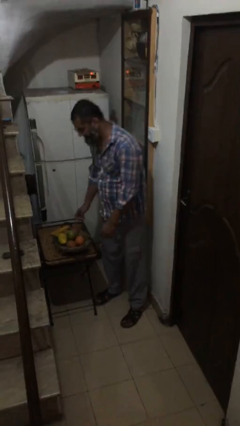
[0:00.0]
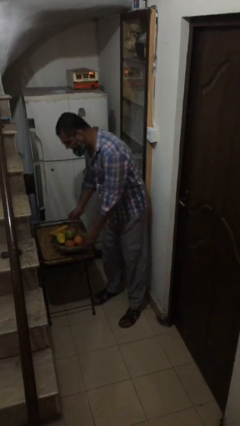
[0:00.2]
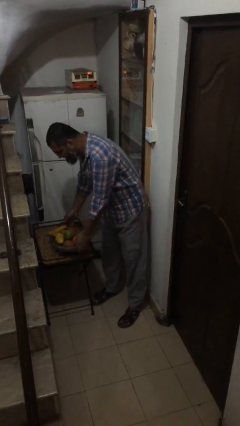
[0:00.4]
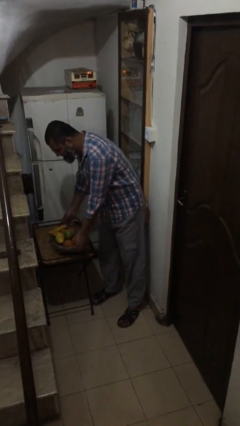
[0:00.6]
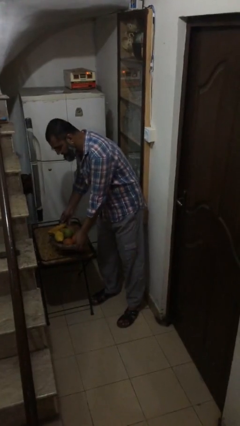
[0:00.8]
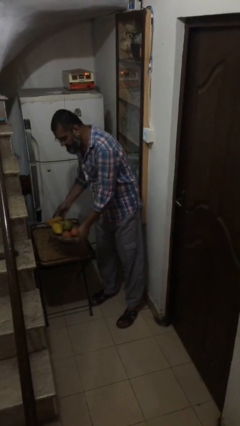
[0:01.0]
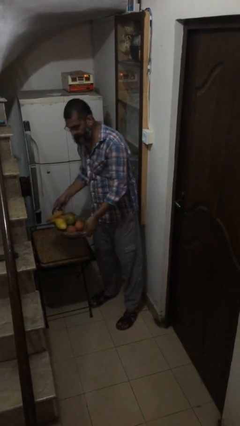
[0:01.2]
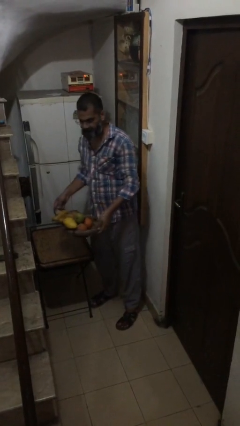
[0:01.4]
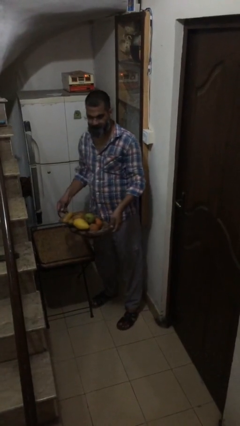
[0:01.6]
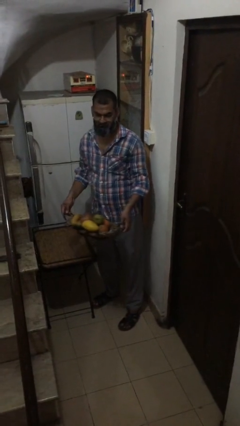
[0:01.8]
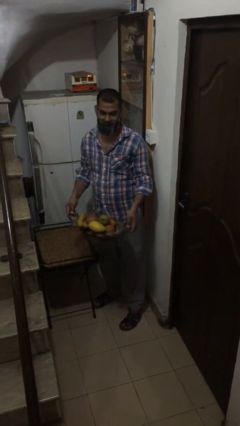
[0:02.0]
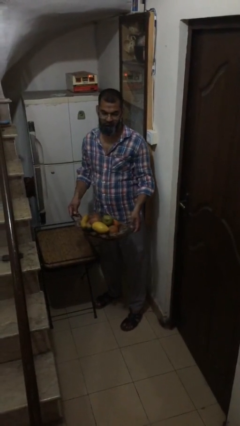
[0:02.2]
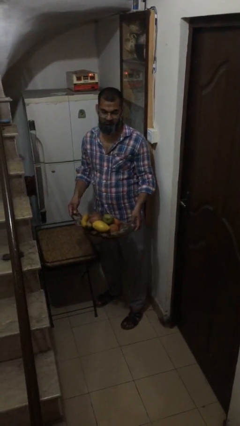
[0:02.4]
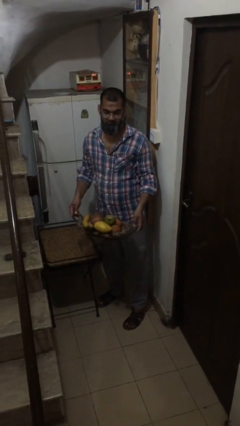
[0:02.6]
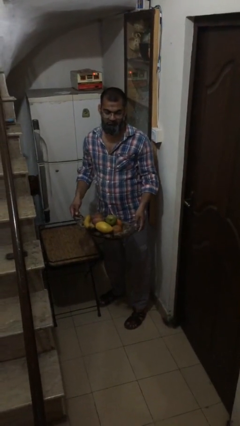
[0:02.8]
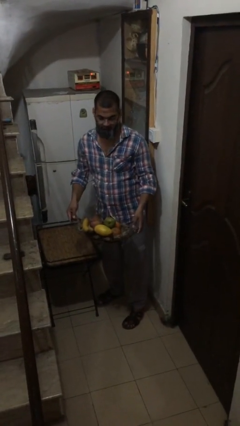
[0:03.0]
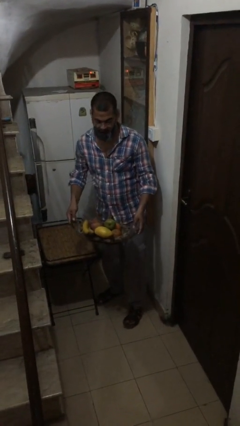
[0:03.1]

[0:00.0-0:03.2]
person picks up object from table

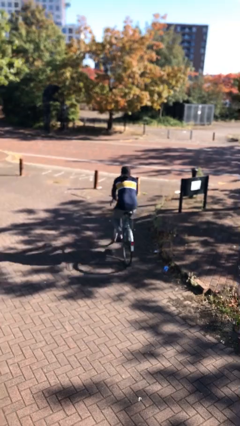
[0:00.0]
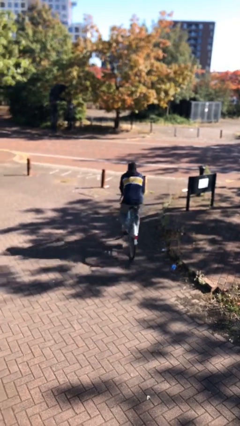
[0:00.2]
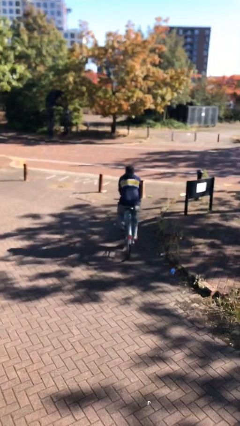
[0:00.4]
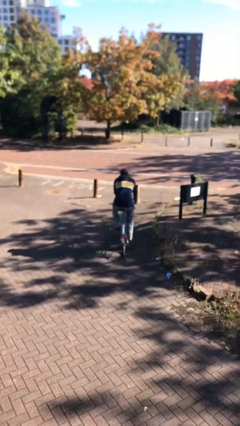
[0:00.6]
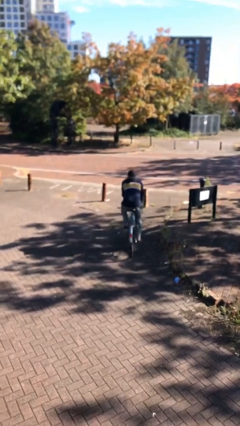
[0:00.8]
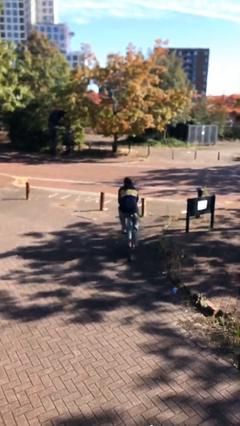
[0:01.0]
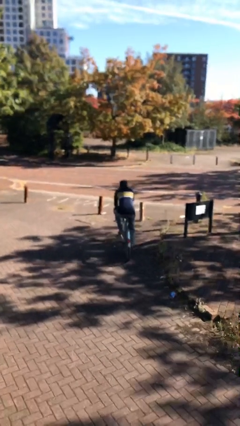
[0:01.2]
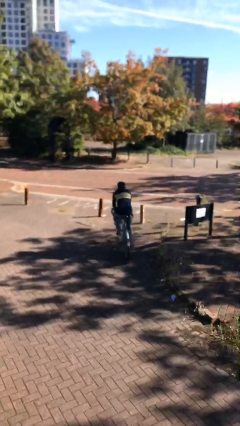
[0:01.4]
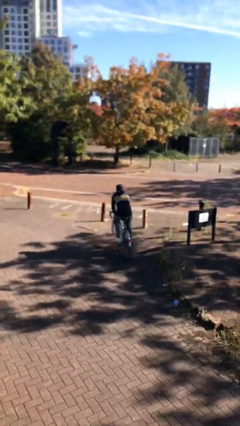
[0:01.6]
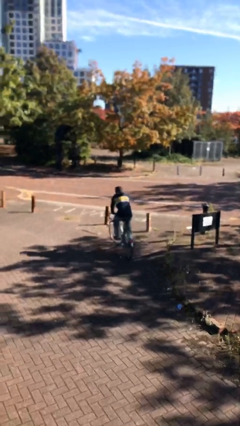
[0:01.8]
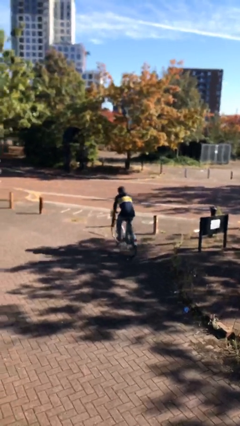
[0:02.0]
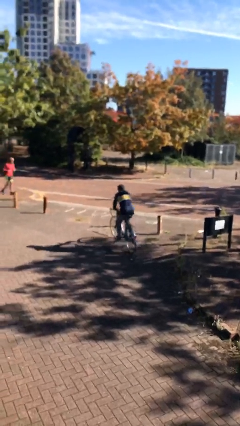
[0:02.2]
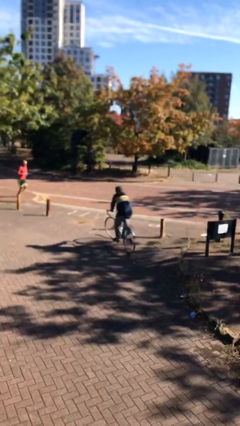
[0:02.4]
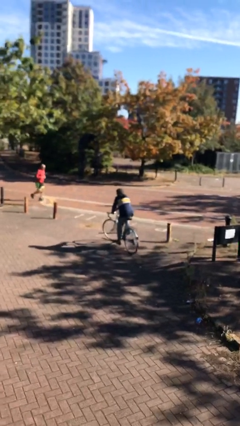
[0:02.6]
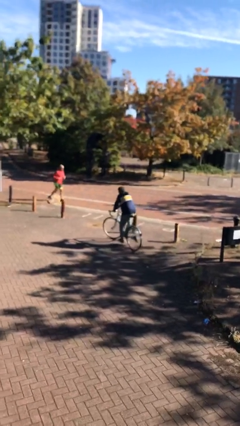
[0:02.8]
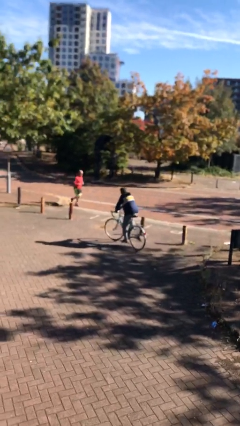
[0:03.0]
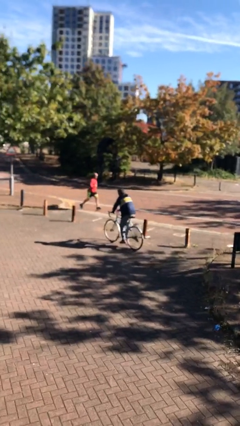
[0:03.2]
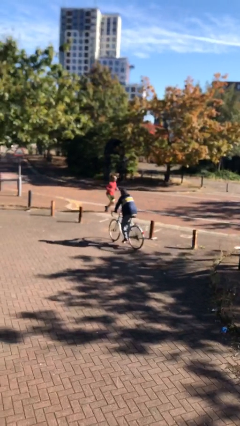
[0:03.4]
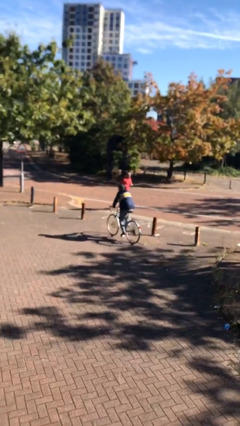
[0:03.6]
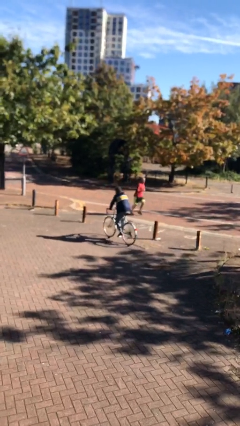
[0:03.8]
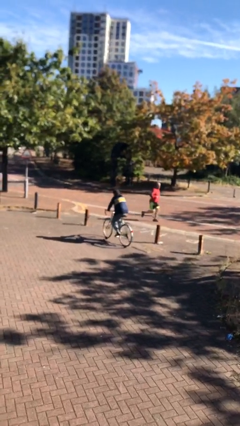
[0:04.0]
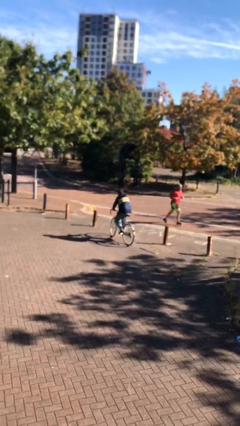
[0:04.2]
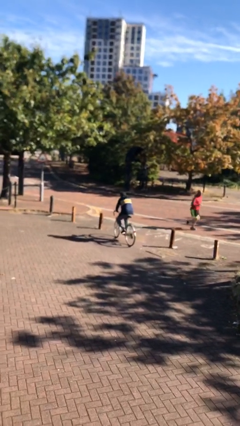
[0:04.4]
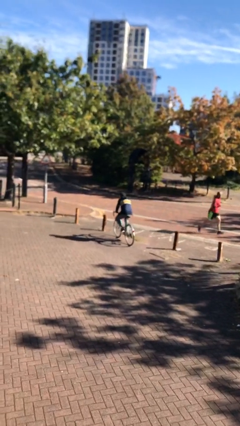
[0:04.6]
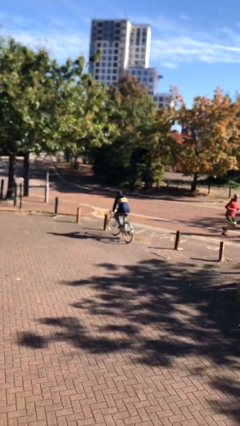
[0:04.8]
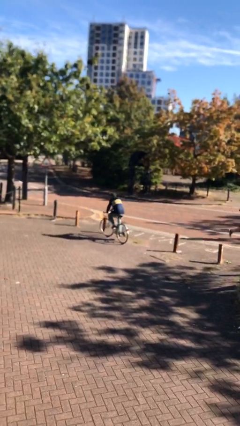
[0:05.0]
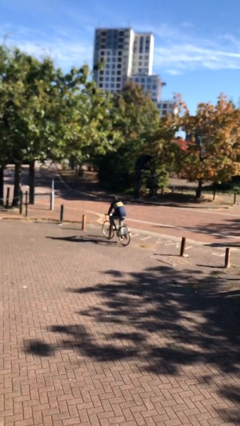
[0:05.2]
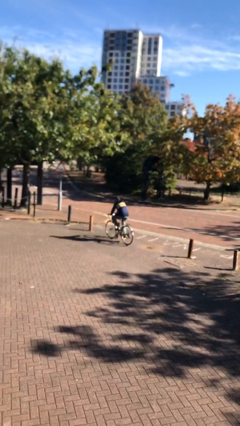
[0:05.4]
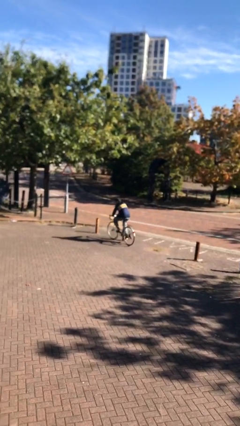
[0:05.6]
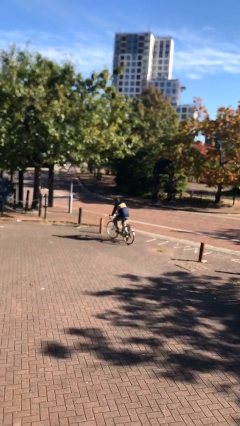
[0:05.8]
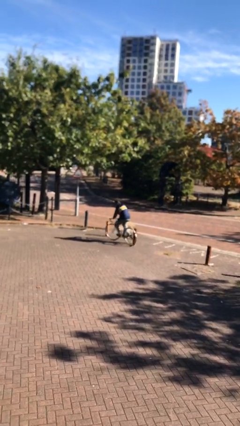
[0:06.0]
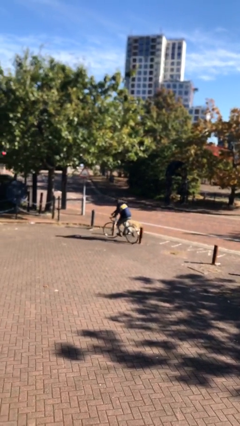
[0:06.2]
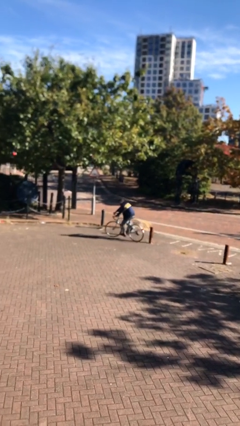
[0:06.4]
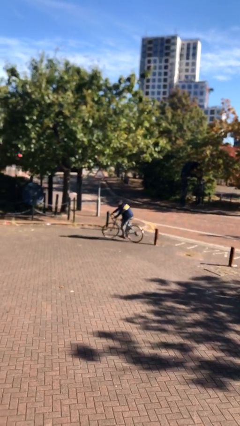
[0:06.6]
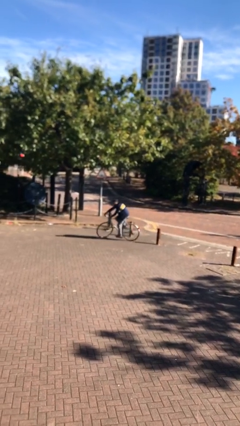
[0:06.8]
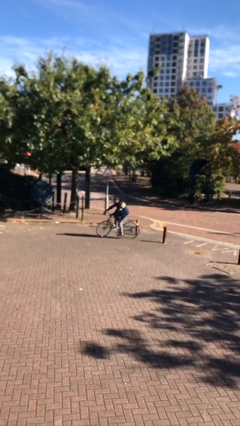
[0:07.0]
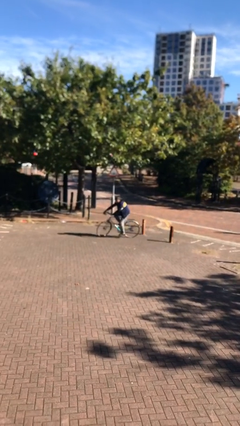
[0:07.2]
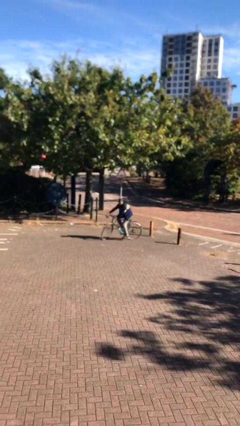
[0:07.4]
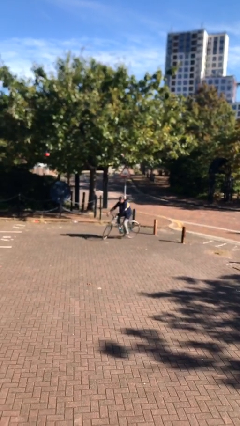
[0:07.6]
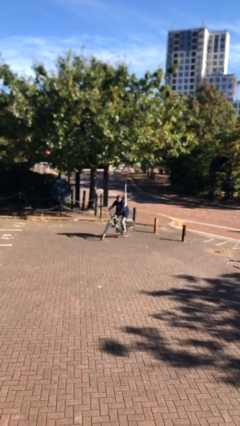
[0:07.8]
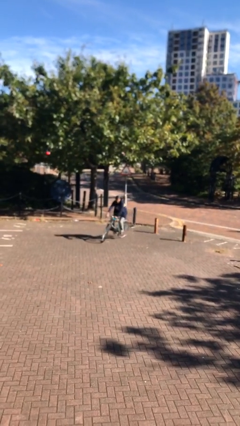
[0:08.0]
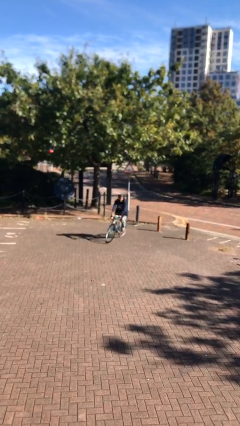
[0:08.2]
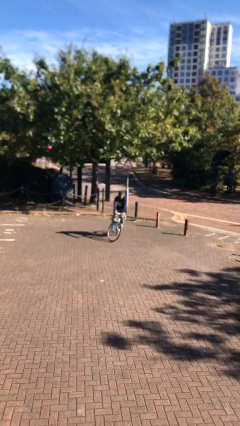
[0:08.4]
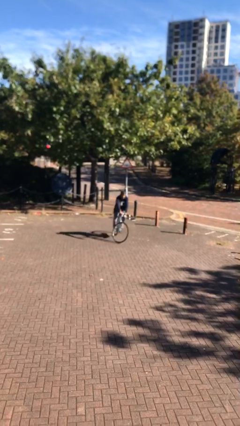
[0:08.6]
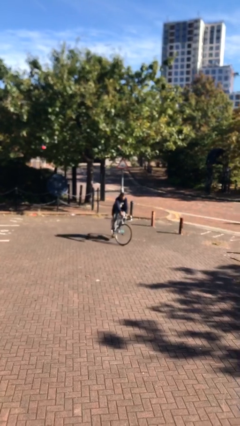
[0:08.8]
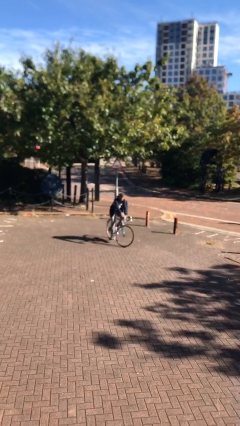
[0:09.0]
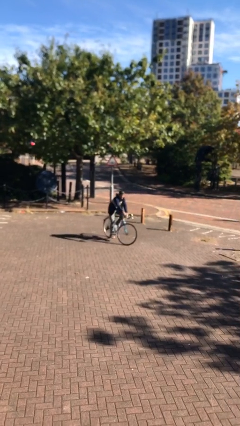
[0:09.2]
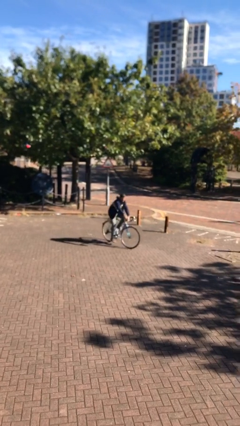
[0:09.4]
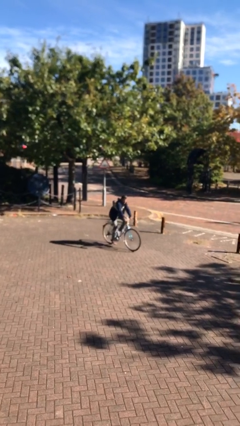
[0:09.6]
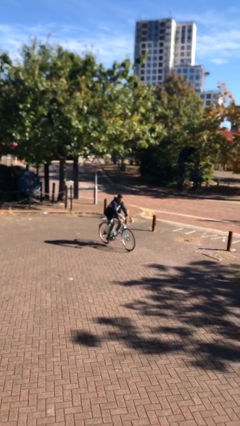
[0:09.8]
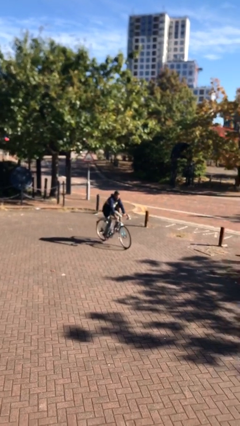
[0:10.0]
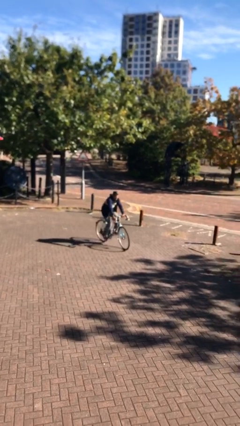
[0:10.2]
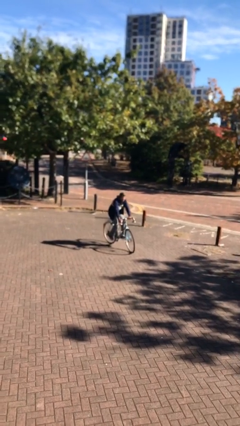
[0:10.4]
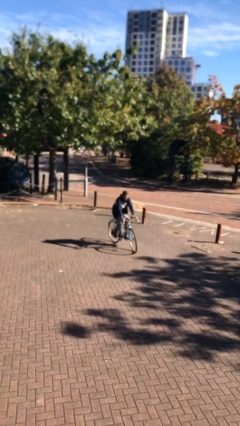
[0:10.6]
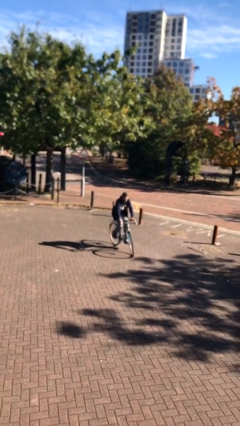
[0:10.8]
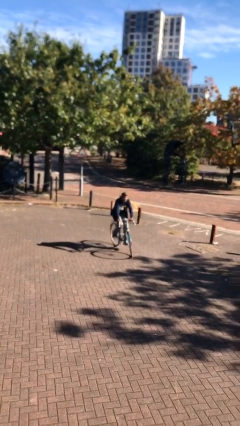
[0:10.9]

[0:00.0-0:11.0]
person rides bicycle

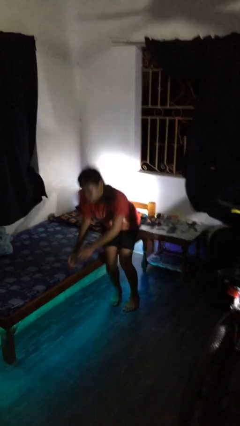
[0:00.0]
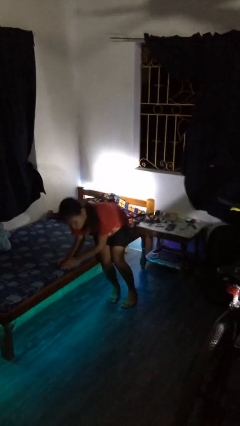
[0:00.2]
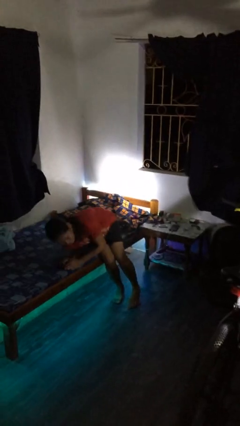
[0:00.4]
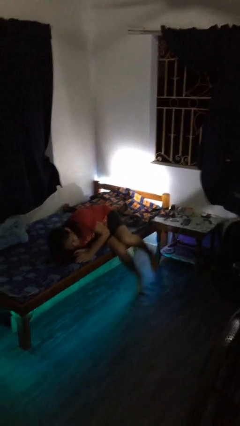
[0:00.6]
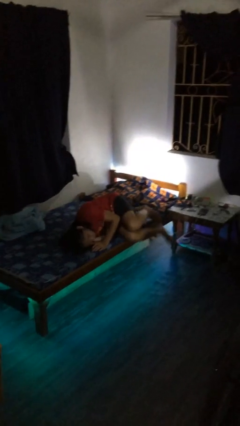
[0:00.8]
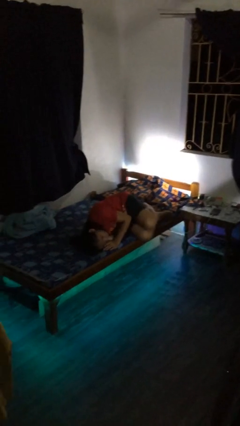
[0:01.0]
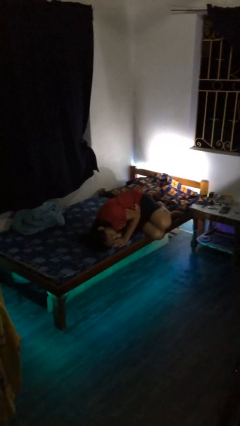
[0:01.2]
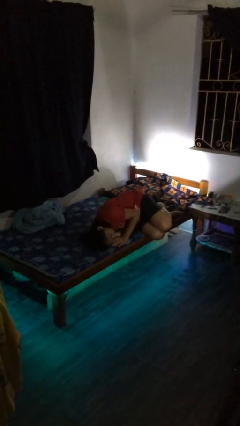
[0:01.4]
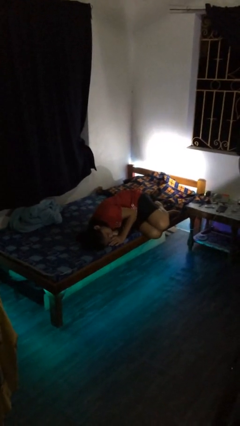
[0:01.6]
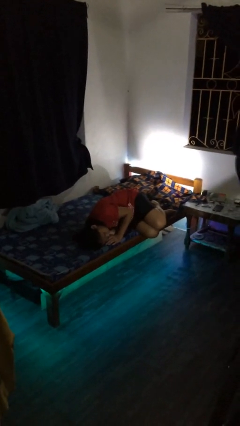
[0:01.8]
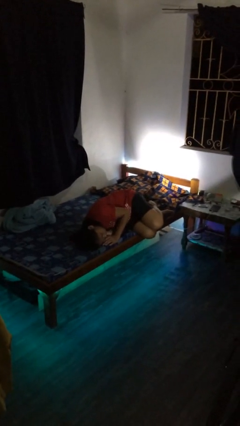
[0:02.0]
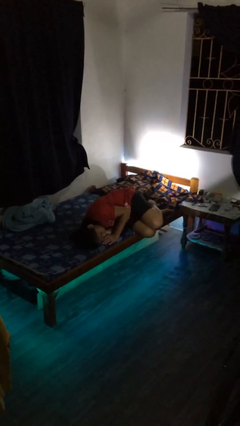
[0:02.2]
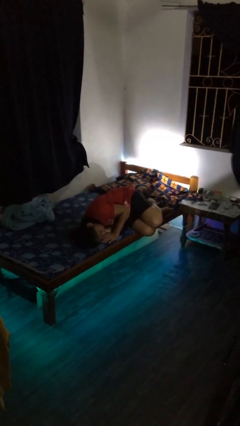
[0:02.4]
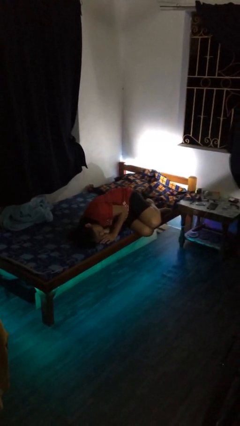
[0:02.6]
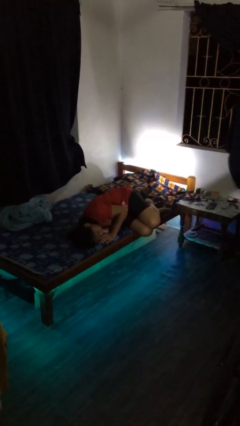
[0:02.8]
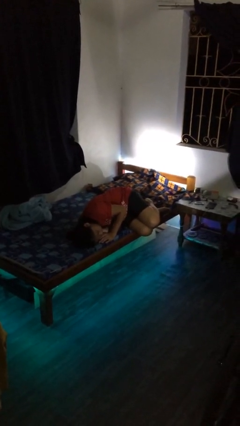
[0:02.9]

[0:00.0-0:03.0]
person lies down on bed

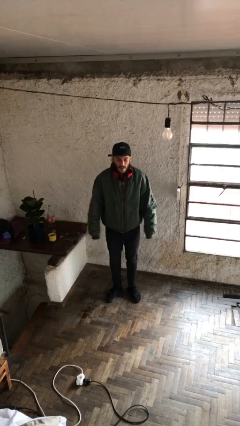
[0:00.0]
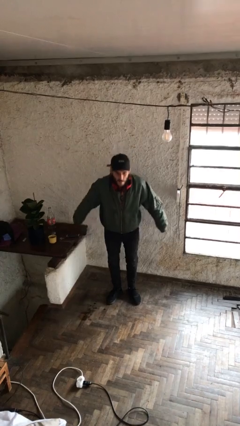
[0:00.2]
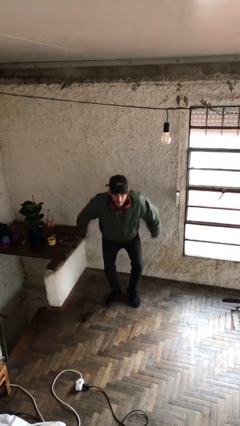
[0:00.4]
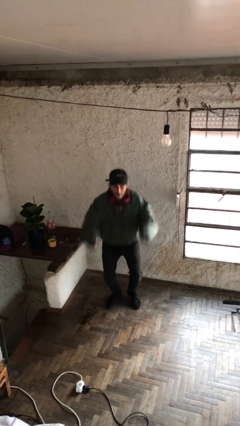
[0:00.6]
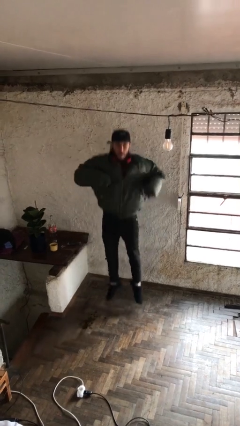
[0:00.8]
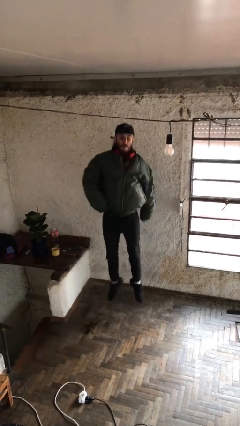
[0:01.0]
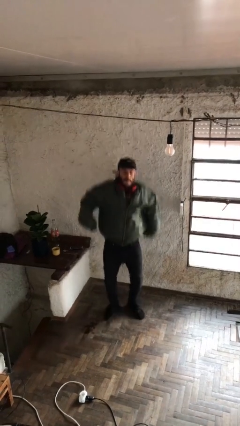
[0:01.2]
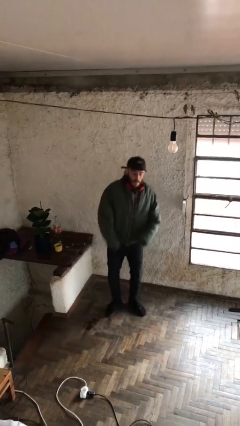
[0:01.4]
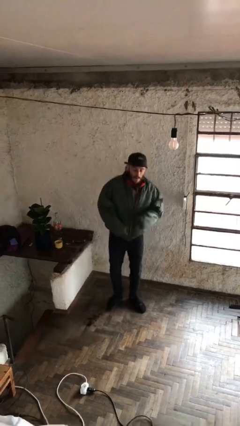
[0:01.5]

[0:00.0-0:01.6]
person jumps
